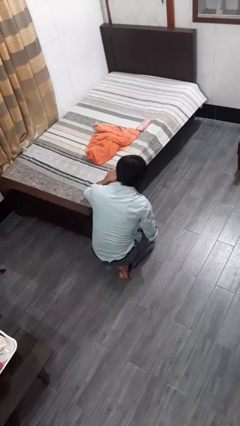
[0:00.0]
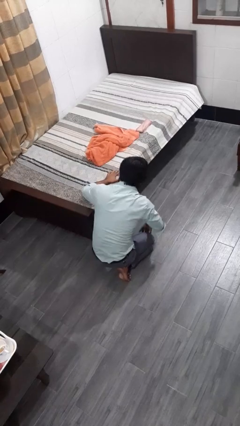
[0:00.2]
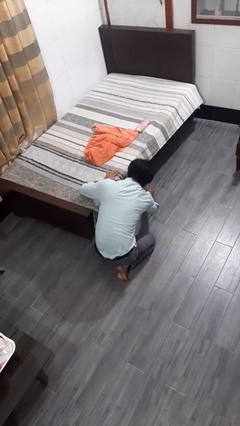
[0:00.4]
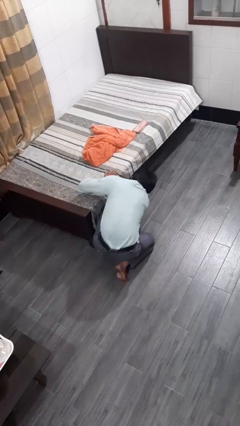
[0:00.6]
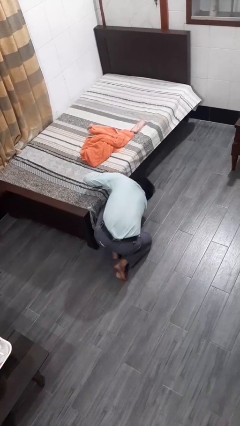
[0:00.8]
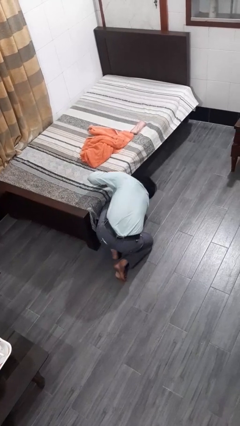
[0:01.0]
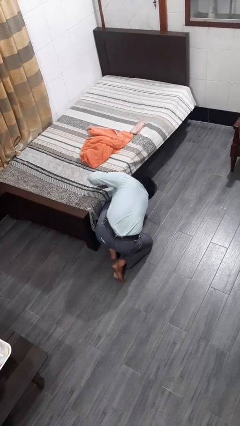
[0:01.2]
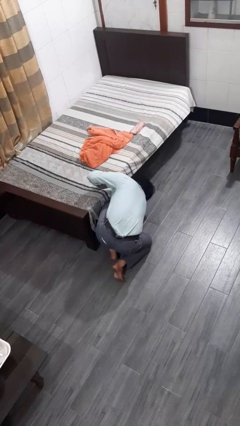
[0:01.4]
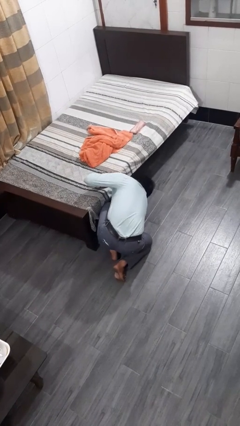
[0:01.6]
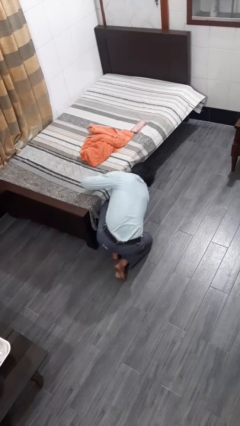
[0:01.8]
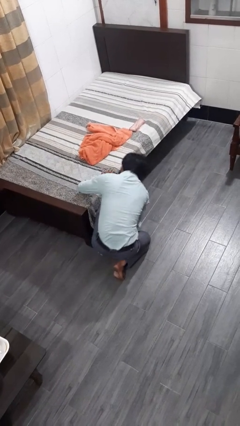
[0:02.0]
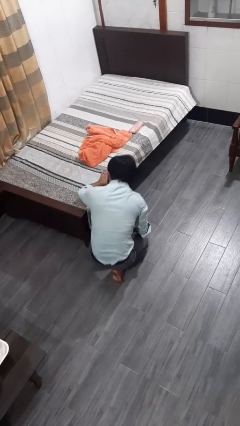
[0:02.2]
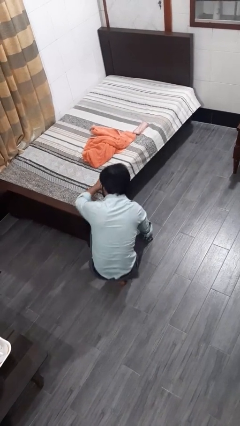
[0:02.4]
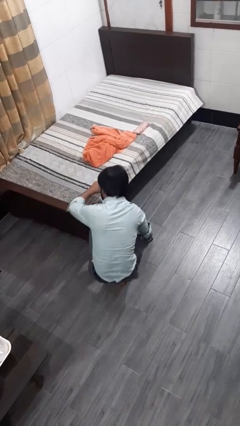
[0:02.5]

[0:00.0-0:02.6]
person searches under bed

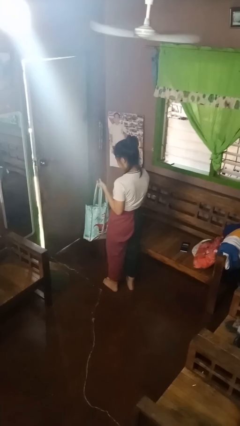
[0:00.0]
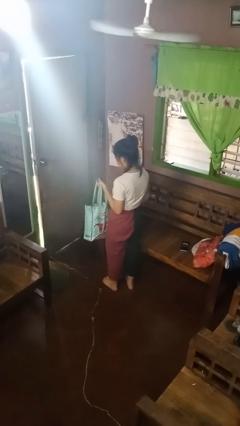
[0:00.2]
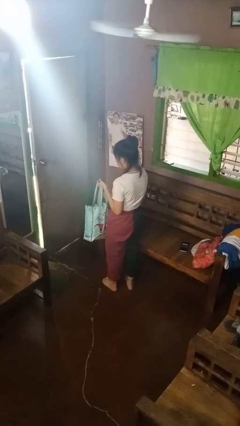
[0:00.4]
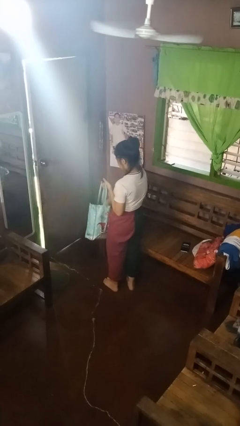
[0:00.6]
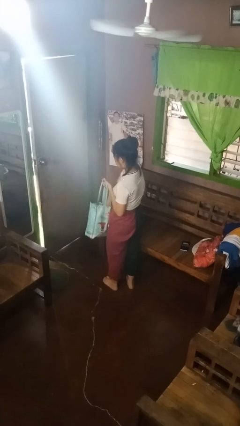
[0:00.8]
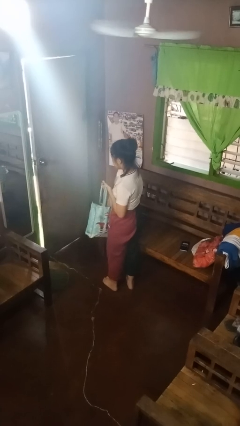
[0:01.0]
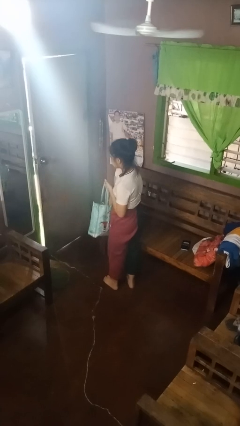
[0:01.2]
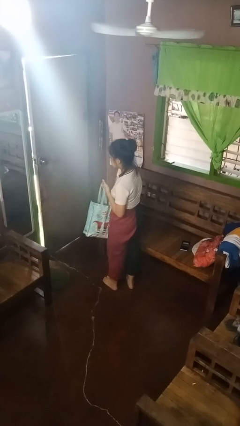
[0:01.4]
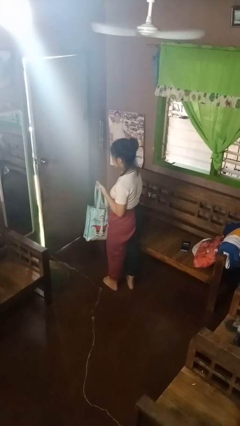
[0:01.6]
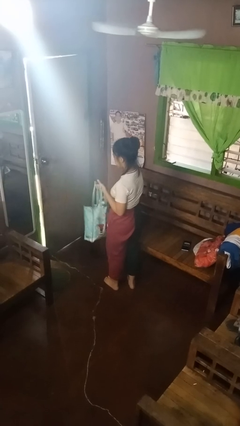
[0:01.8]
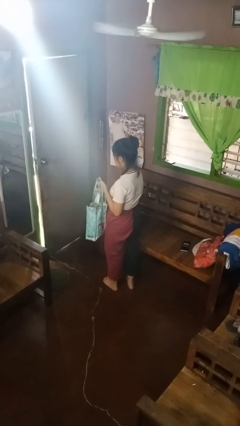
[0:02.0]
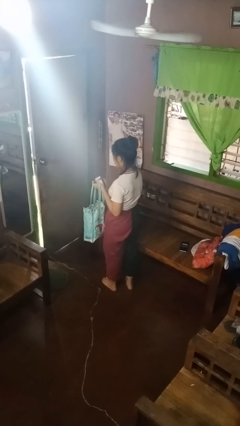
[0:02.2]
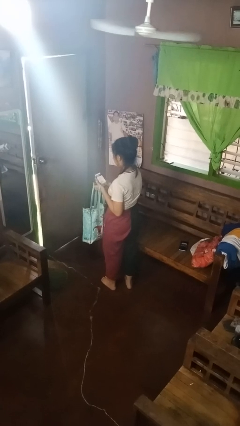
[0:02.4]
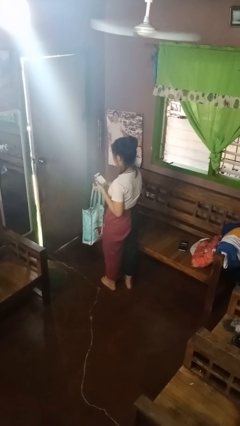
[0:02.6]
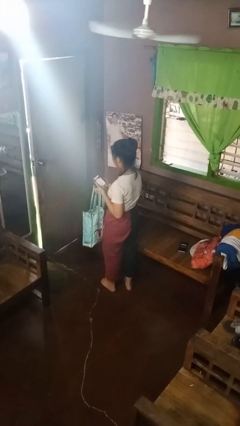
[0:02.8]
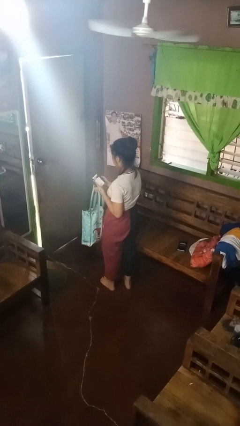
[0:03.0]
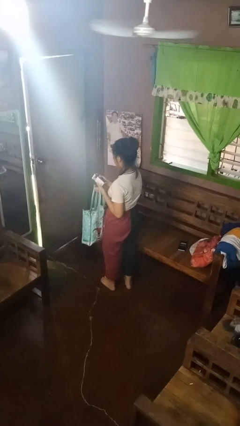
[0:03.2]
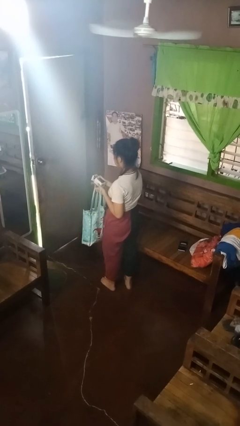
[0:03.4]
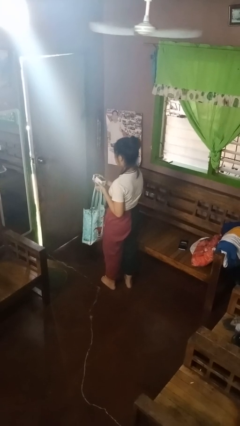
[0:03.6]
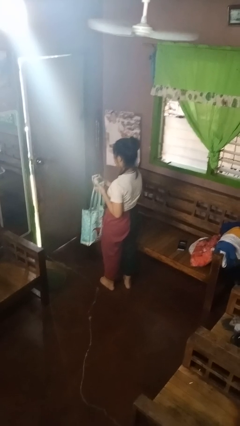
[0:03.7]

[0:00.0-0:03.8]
person takes object from bag

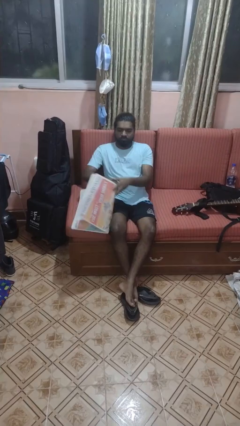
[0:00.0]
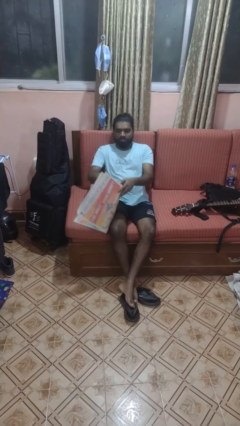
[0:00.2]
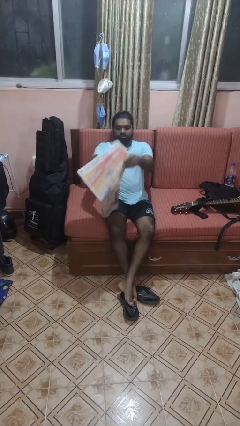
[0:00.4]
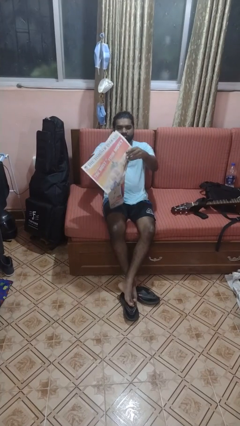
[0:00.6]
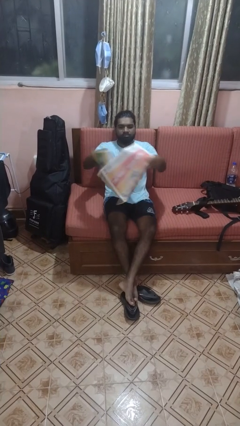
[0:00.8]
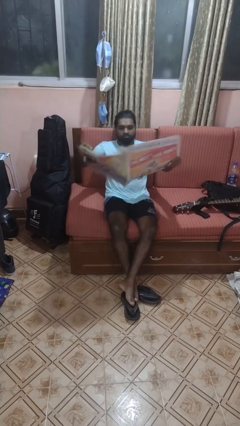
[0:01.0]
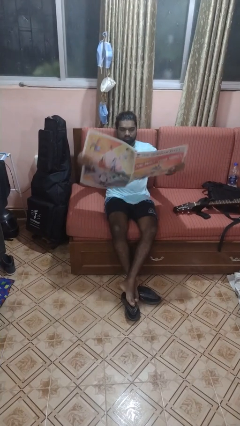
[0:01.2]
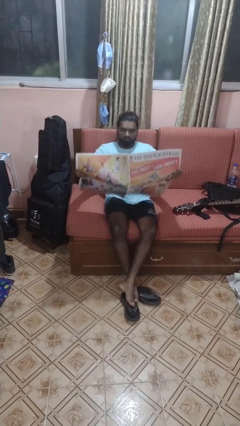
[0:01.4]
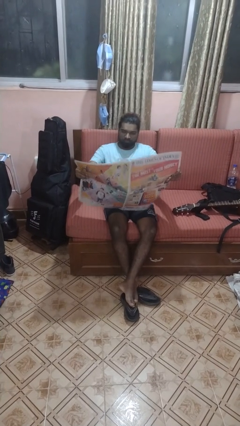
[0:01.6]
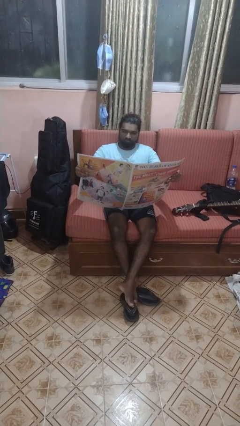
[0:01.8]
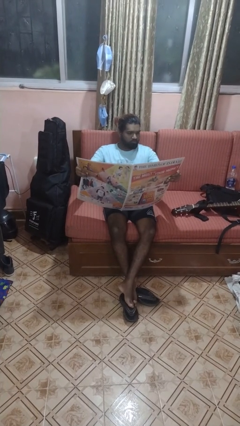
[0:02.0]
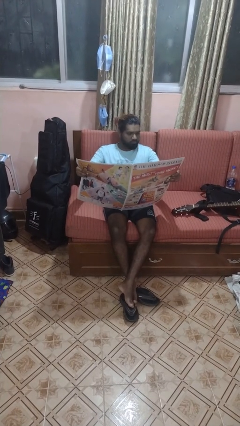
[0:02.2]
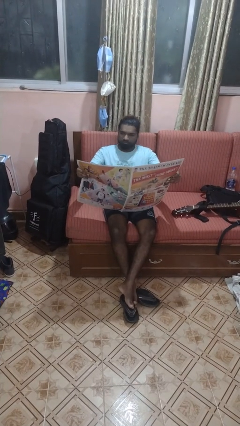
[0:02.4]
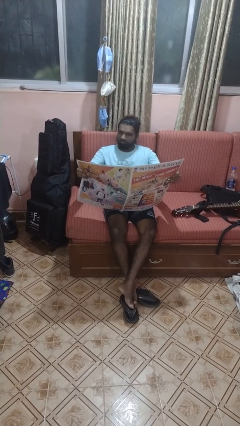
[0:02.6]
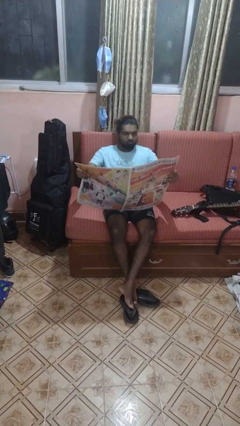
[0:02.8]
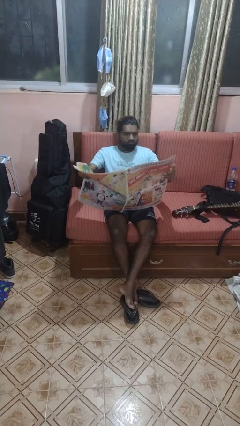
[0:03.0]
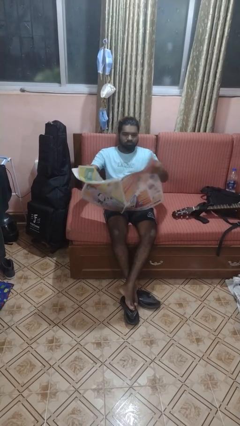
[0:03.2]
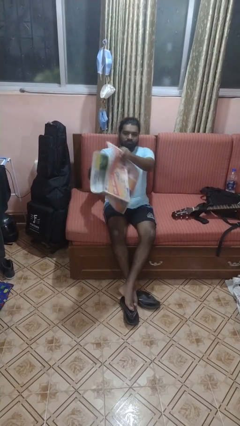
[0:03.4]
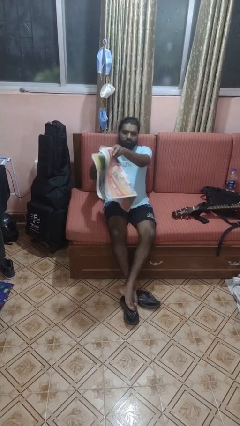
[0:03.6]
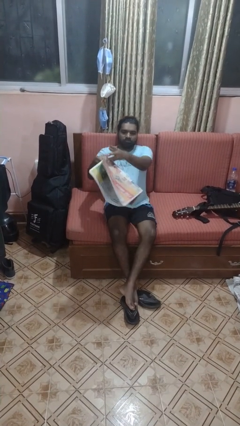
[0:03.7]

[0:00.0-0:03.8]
person reads newspaper

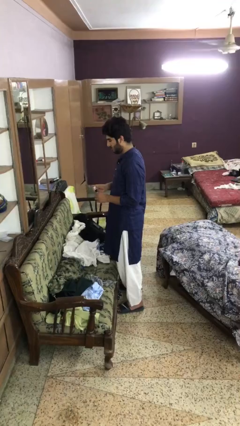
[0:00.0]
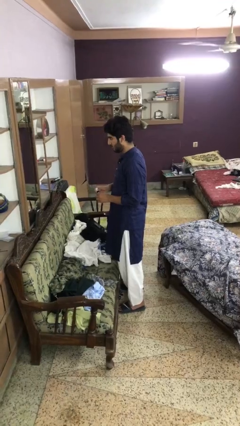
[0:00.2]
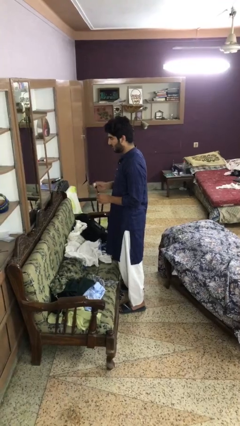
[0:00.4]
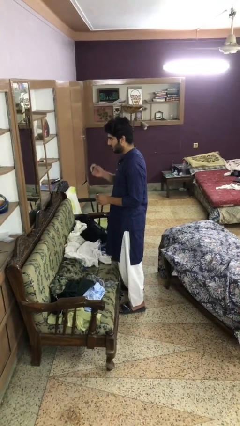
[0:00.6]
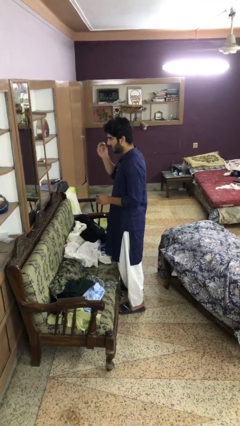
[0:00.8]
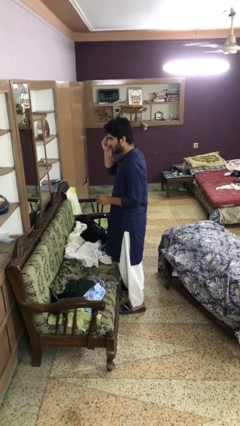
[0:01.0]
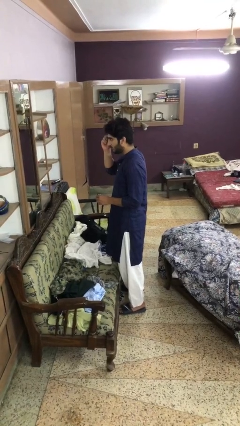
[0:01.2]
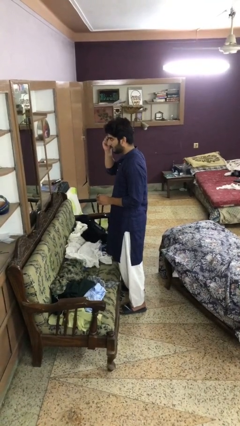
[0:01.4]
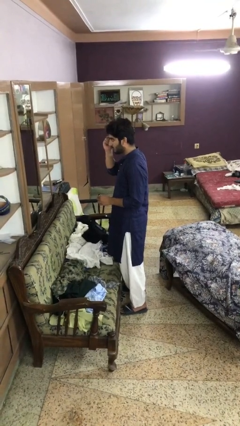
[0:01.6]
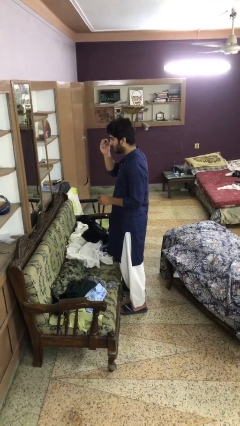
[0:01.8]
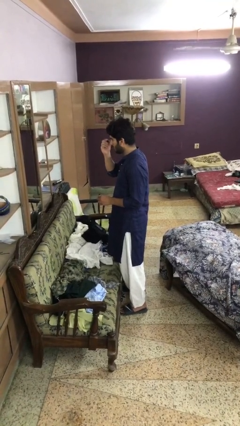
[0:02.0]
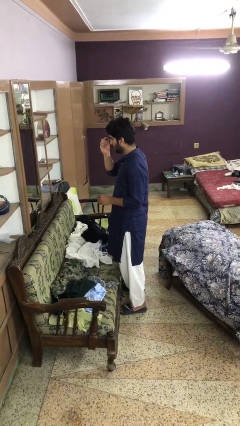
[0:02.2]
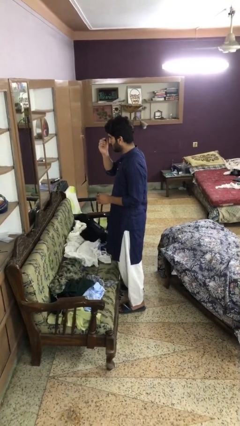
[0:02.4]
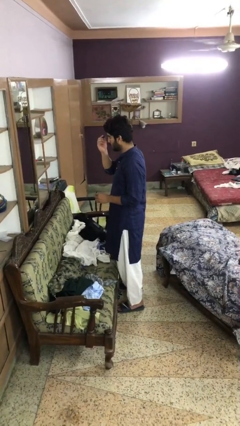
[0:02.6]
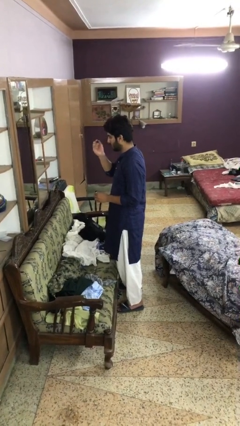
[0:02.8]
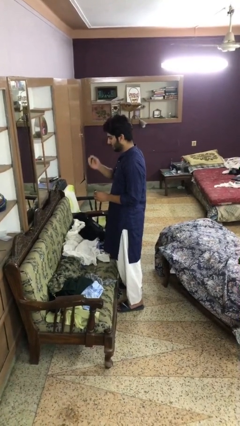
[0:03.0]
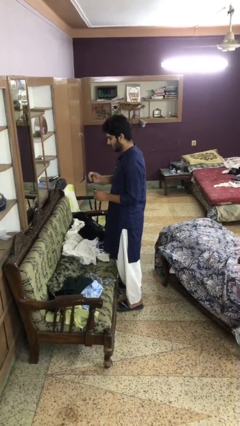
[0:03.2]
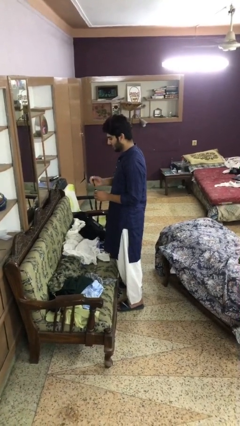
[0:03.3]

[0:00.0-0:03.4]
person applies eye makeup

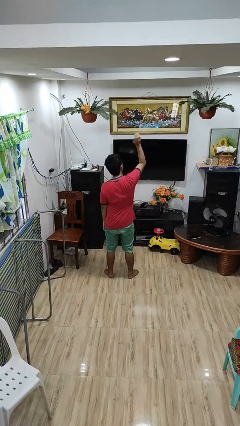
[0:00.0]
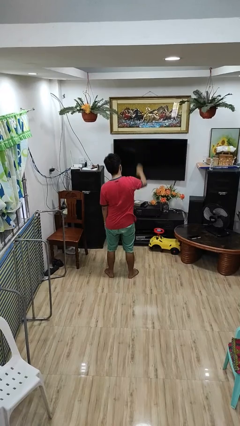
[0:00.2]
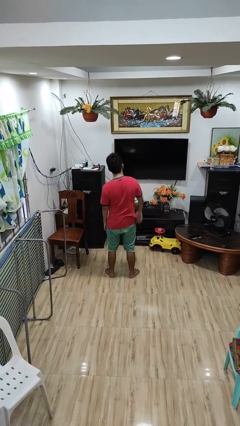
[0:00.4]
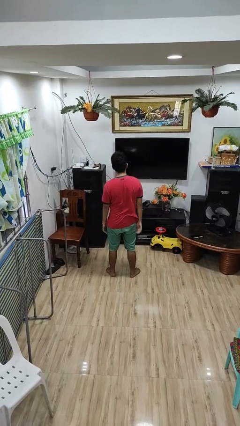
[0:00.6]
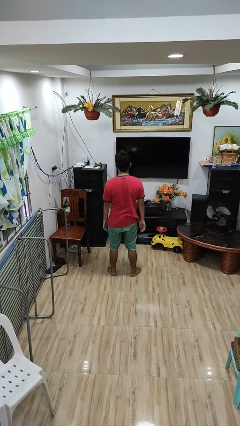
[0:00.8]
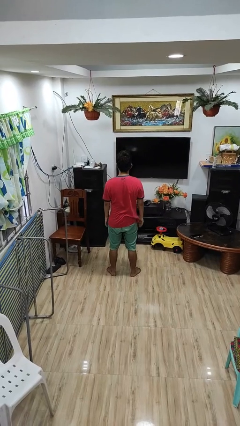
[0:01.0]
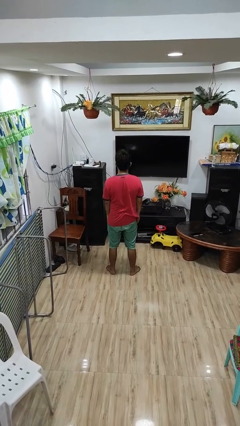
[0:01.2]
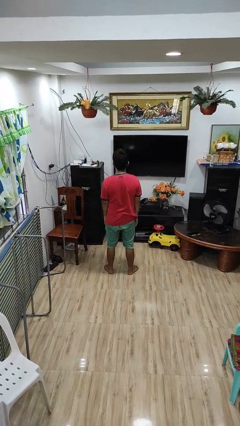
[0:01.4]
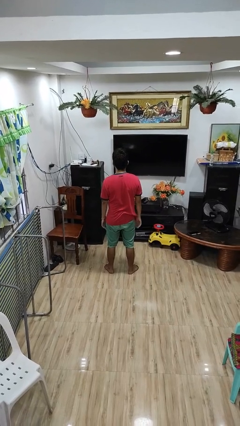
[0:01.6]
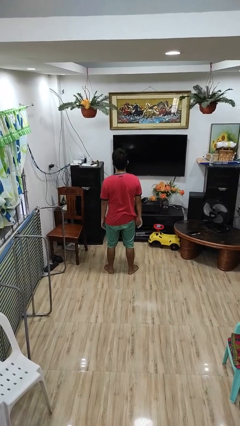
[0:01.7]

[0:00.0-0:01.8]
person gestures swipe down

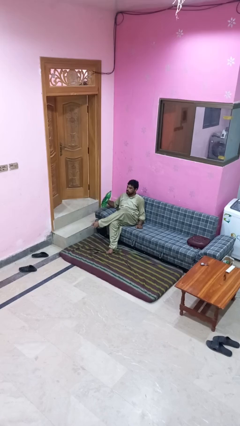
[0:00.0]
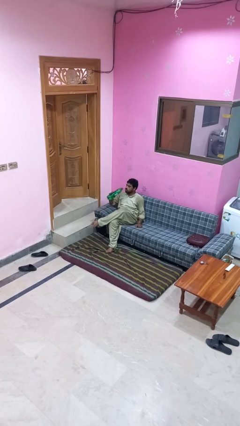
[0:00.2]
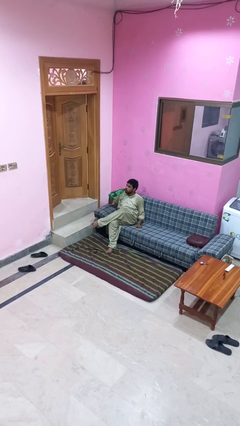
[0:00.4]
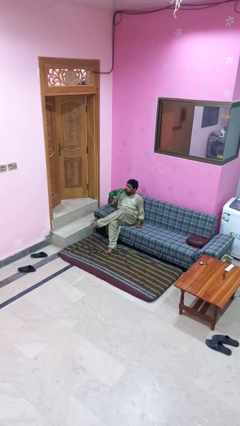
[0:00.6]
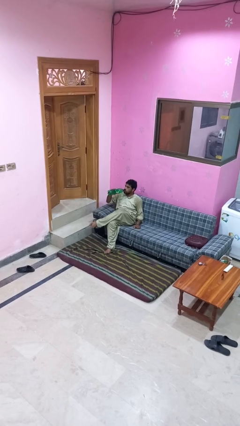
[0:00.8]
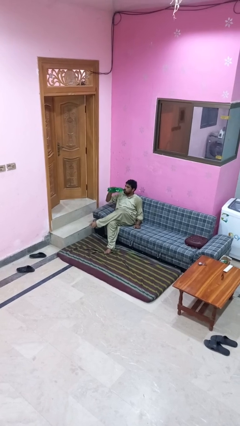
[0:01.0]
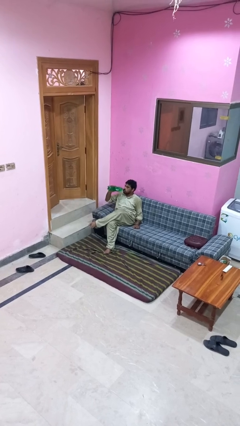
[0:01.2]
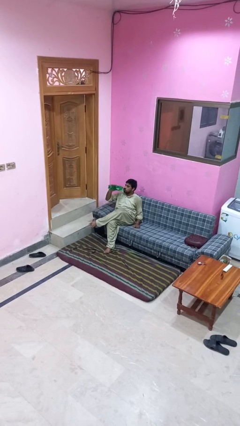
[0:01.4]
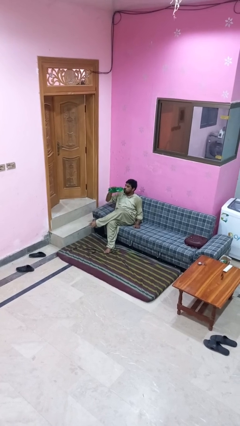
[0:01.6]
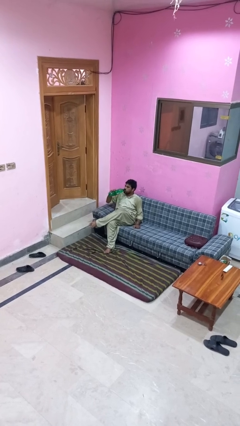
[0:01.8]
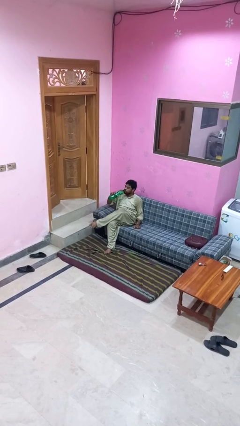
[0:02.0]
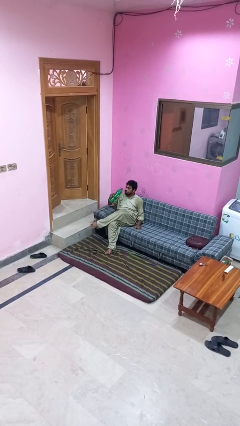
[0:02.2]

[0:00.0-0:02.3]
person drinks from bottle
